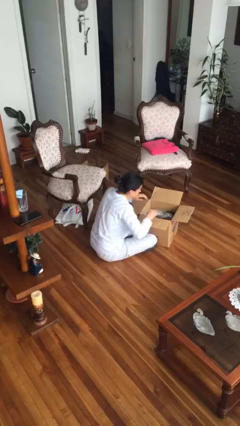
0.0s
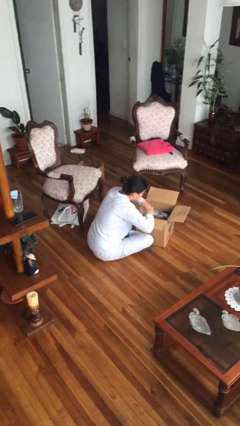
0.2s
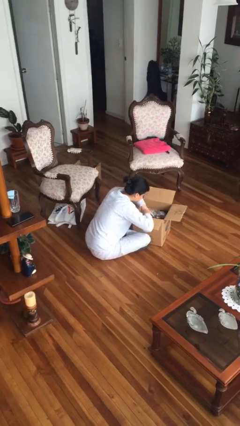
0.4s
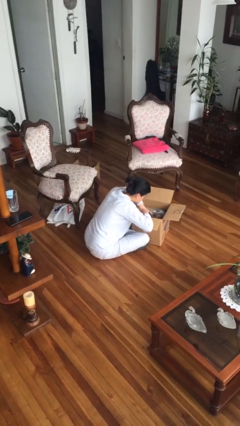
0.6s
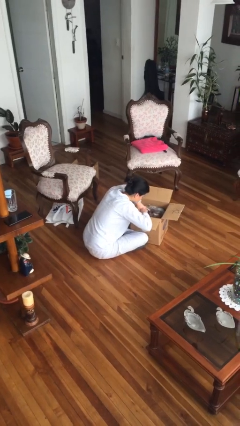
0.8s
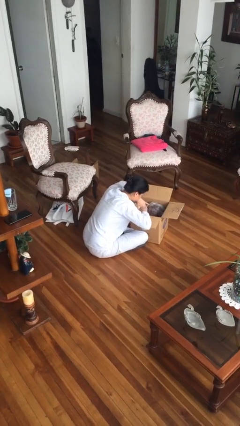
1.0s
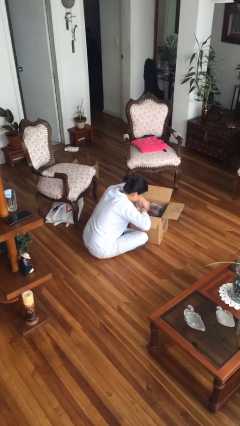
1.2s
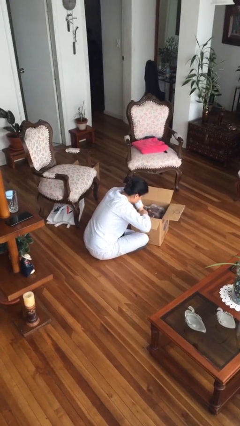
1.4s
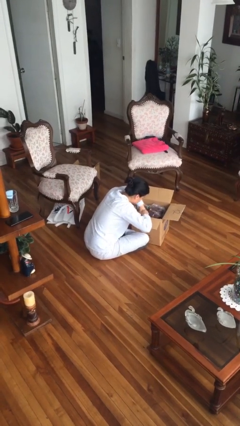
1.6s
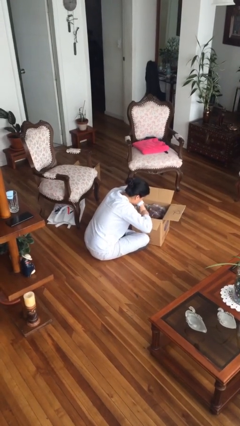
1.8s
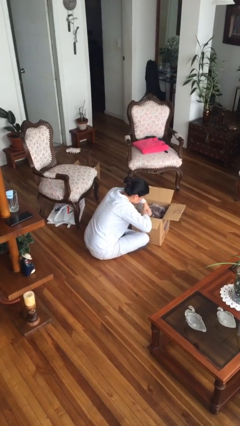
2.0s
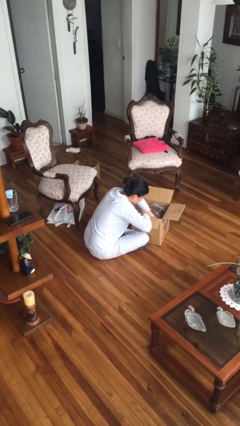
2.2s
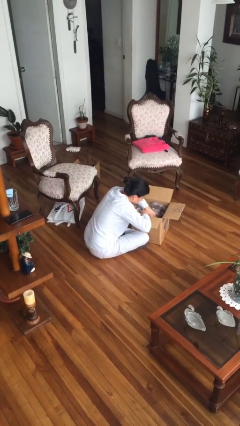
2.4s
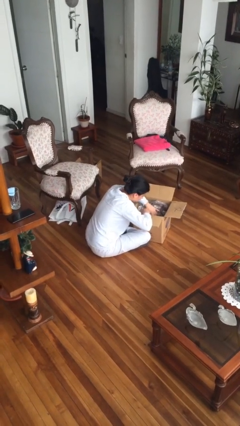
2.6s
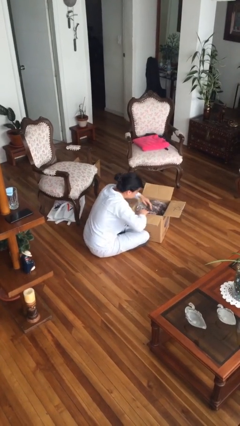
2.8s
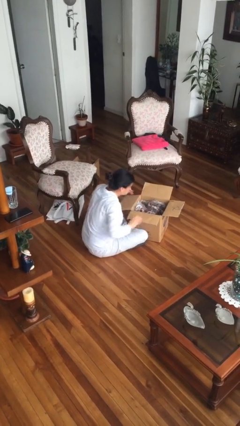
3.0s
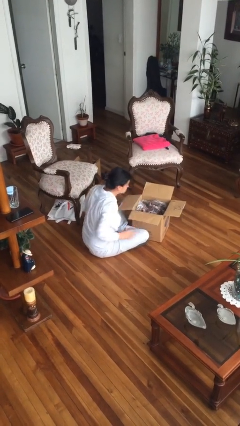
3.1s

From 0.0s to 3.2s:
person searches in box

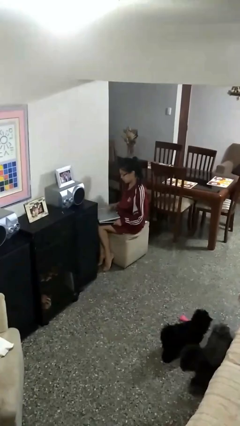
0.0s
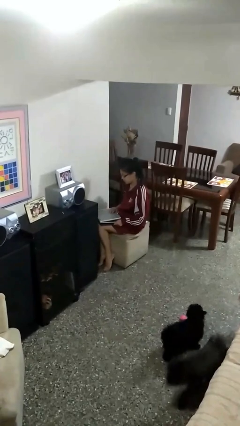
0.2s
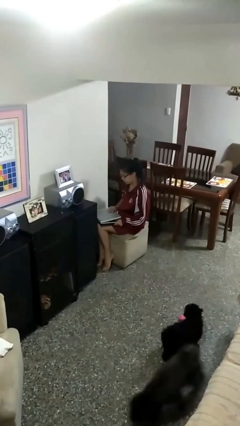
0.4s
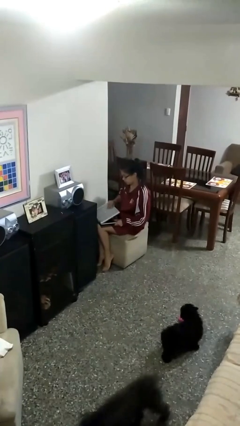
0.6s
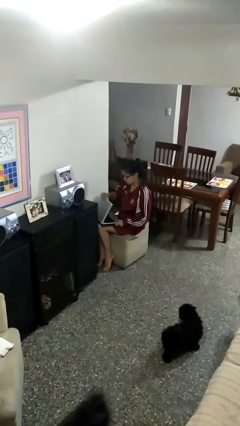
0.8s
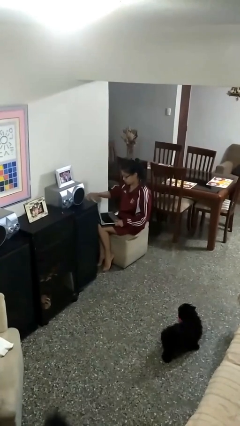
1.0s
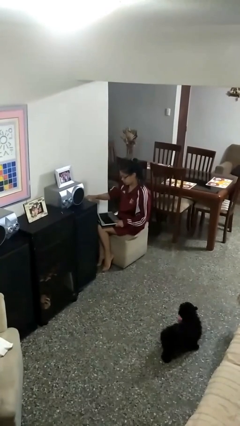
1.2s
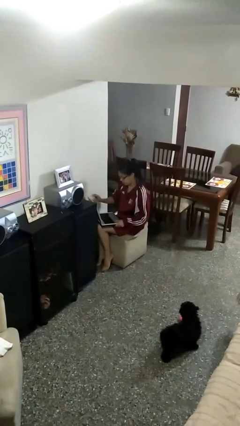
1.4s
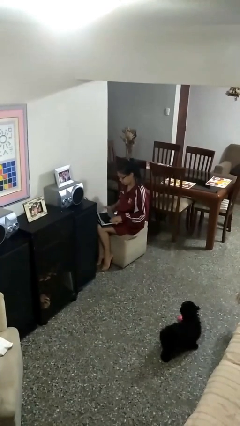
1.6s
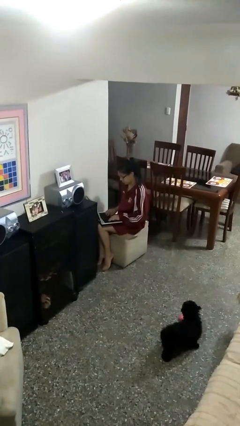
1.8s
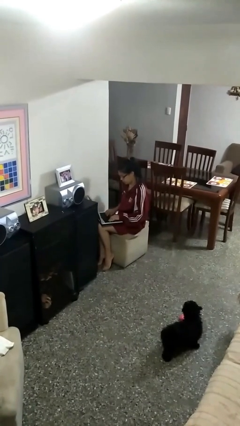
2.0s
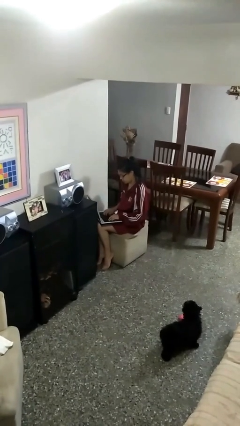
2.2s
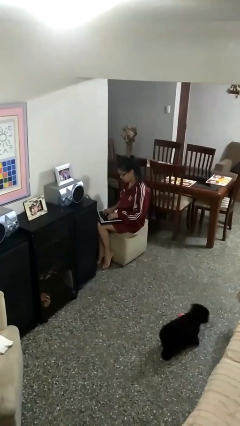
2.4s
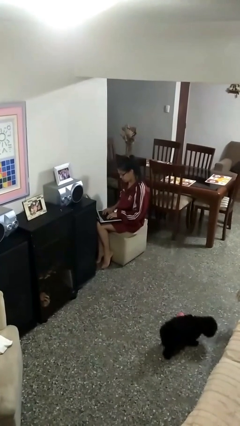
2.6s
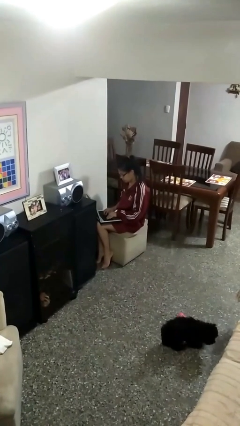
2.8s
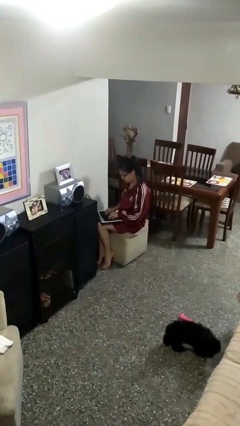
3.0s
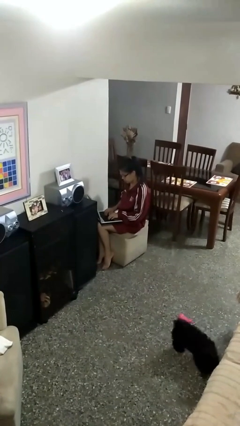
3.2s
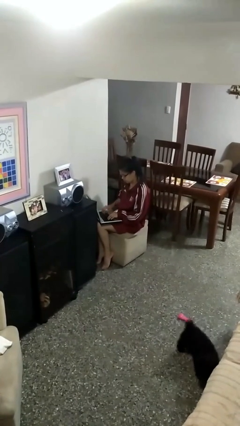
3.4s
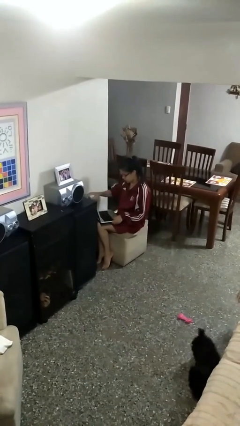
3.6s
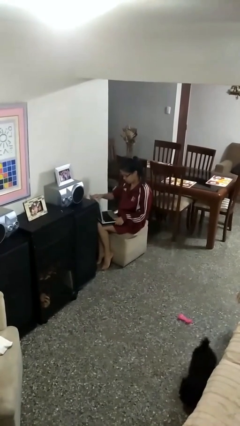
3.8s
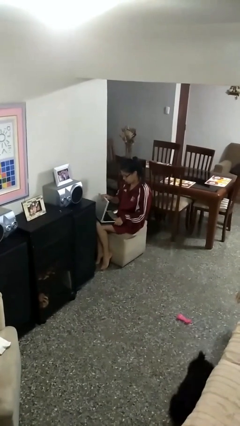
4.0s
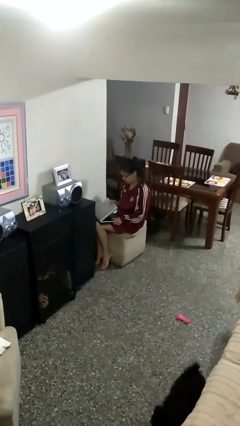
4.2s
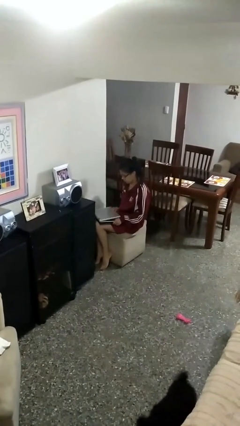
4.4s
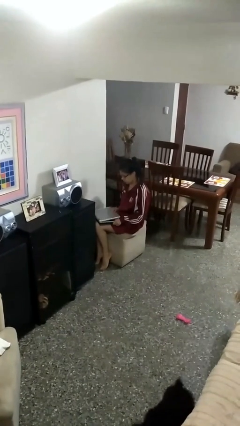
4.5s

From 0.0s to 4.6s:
person interacts with laptop

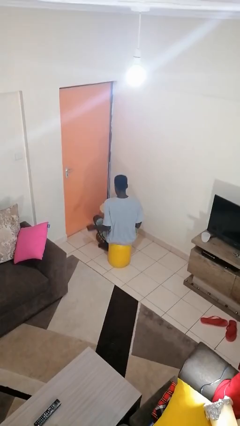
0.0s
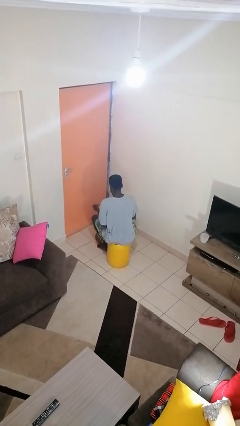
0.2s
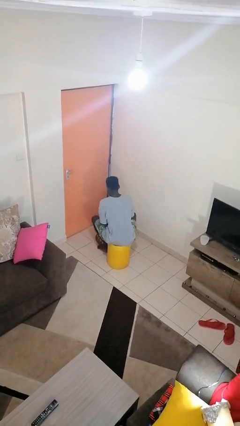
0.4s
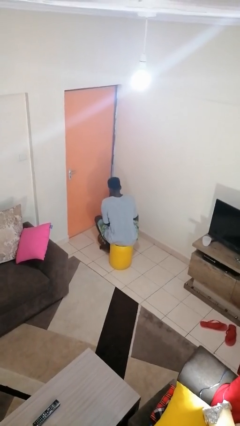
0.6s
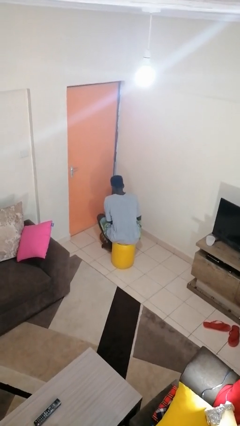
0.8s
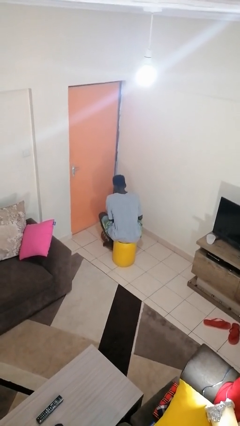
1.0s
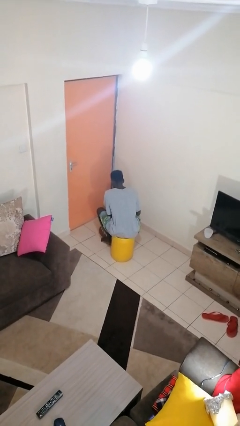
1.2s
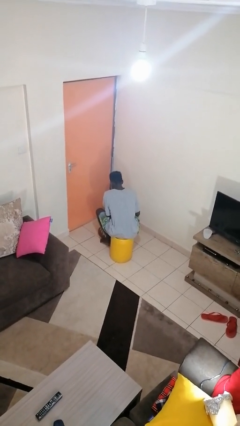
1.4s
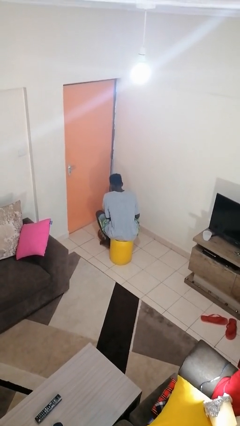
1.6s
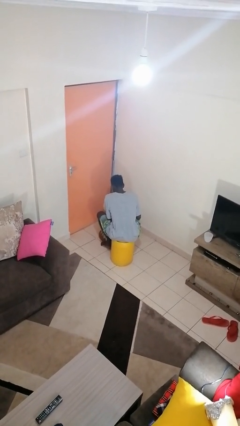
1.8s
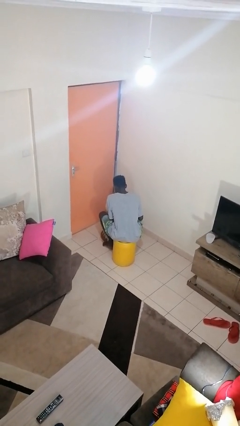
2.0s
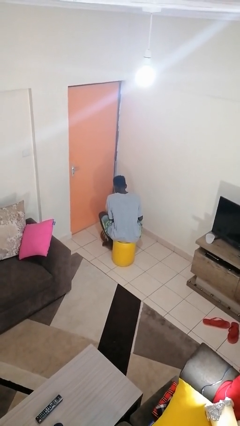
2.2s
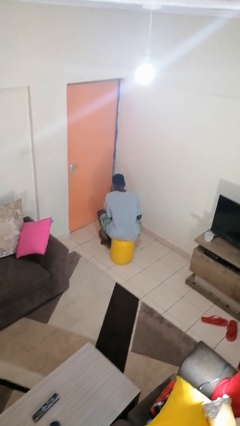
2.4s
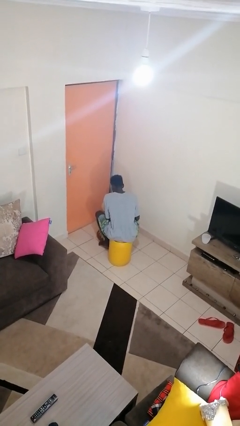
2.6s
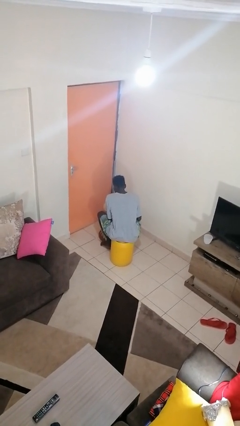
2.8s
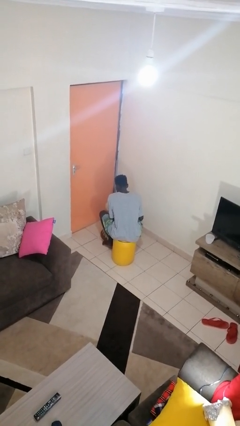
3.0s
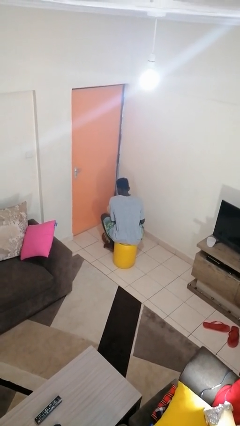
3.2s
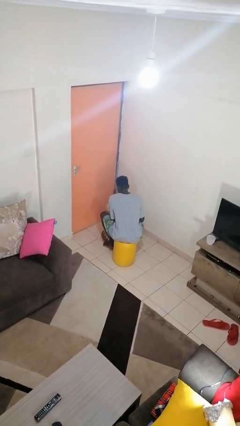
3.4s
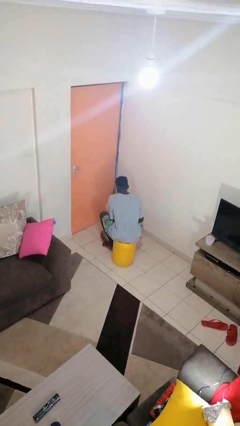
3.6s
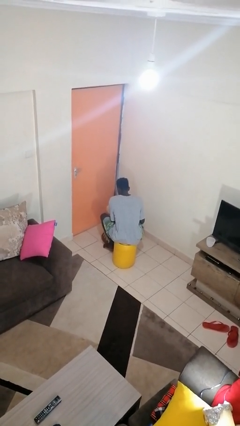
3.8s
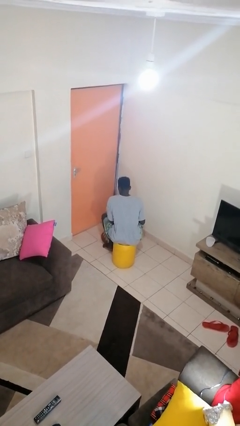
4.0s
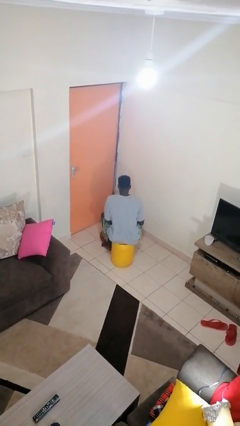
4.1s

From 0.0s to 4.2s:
person paints fingernails

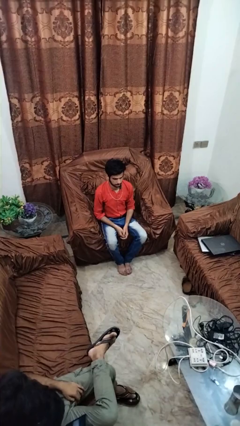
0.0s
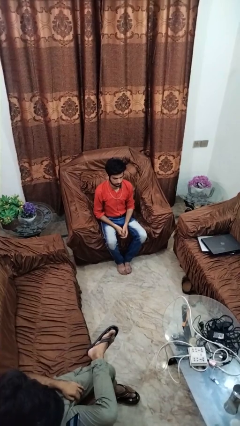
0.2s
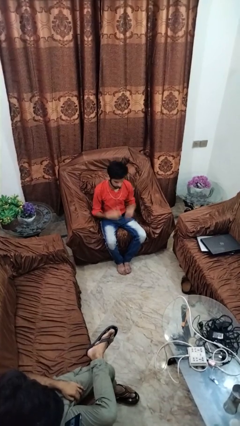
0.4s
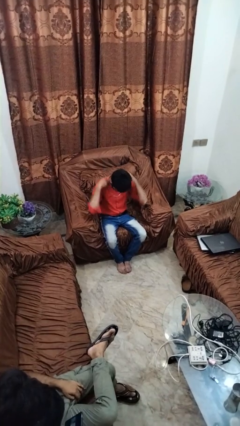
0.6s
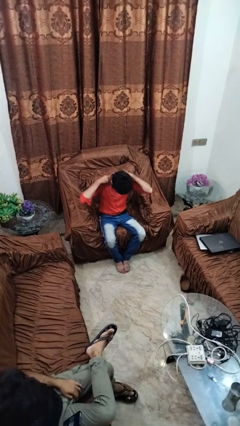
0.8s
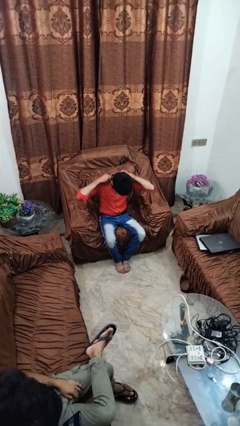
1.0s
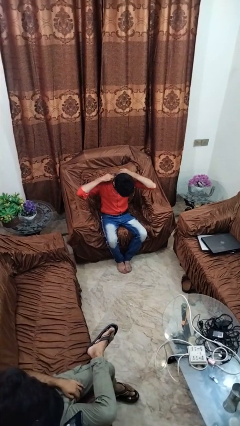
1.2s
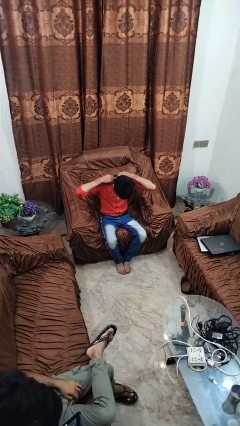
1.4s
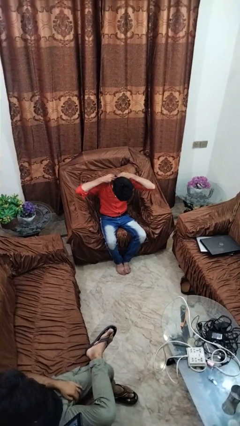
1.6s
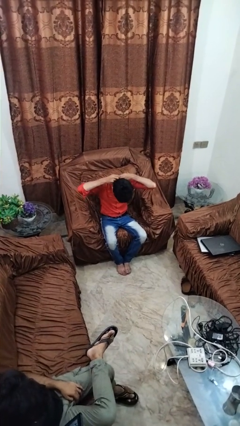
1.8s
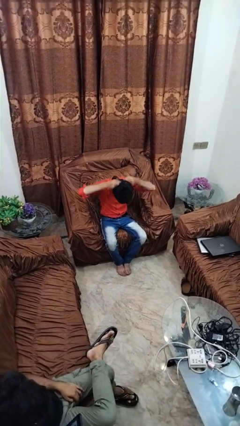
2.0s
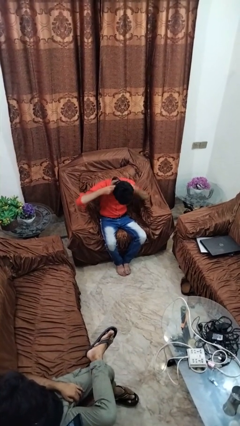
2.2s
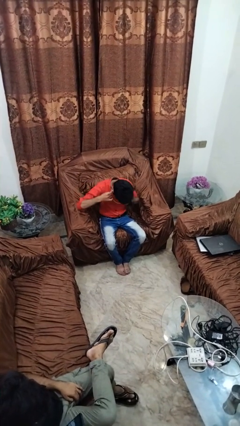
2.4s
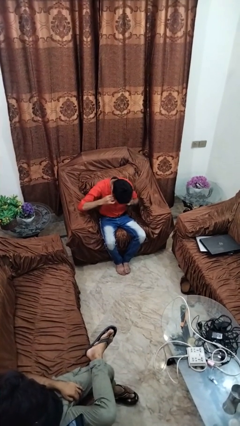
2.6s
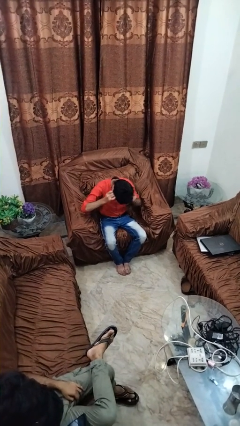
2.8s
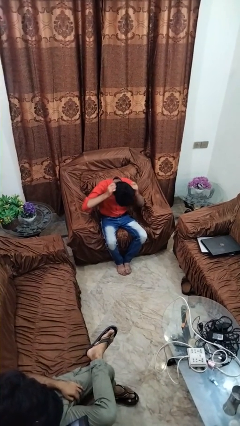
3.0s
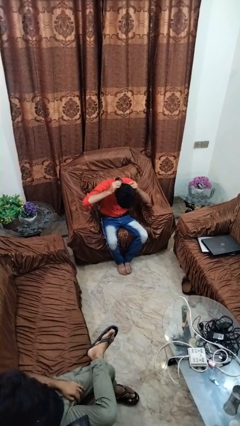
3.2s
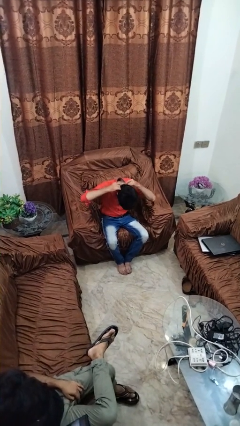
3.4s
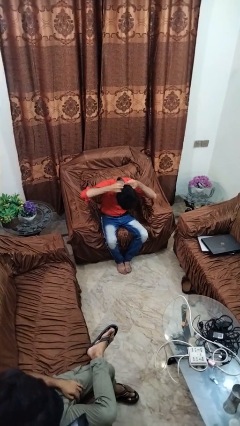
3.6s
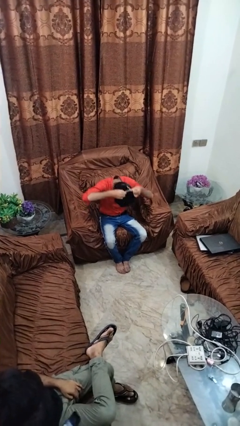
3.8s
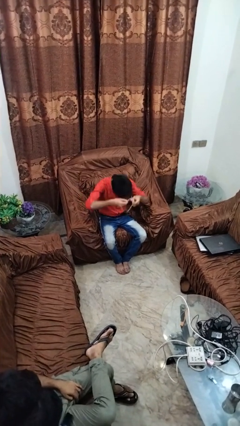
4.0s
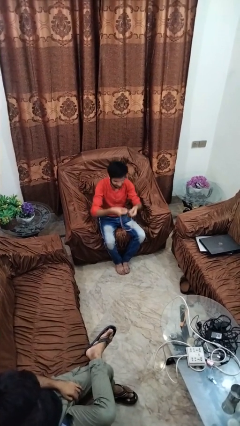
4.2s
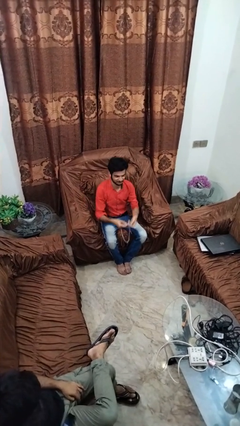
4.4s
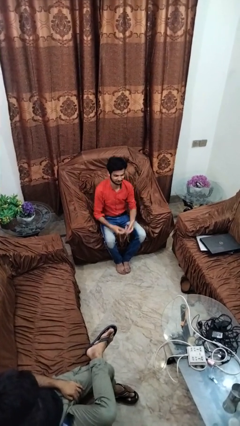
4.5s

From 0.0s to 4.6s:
person takes off necklace

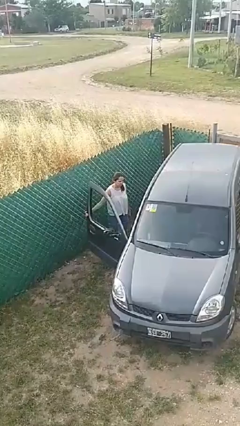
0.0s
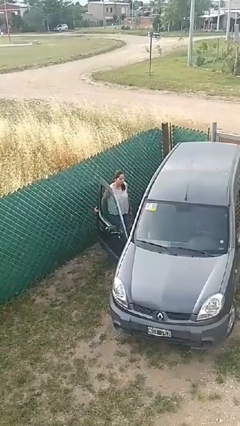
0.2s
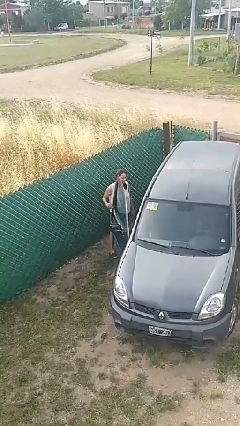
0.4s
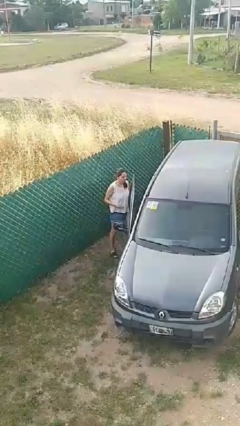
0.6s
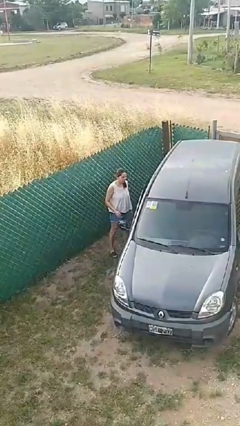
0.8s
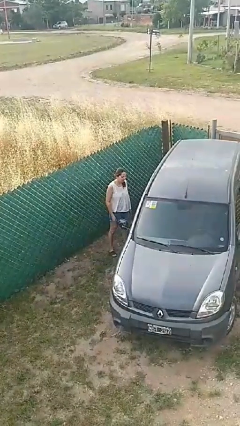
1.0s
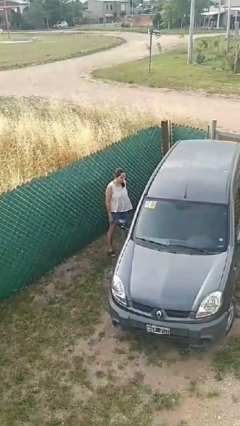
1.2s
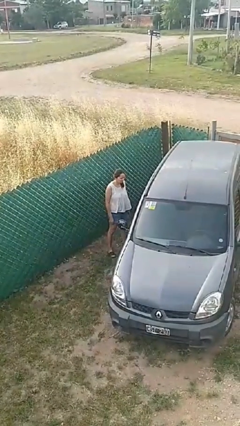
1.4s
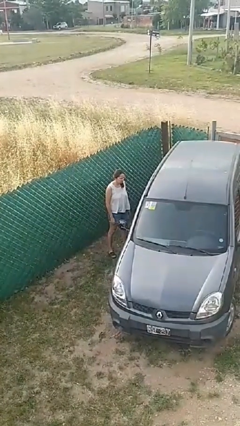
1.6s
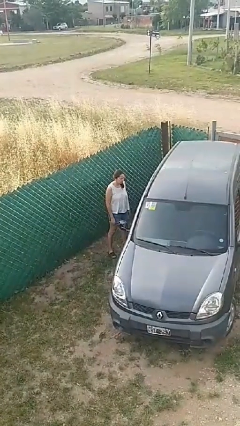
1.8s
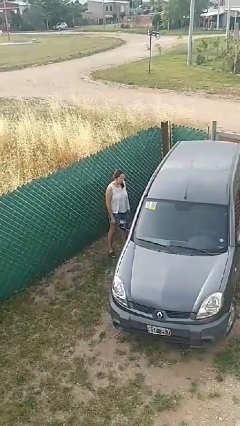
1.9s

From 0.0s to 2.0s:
person closes car door
